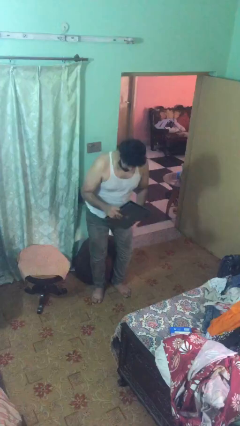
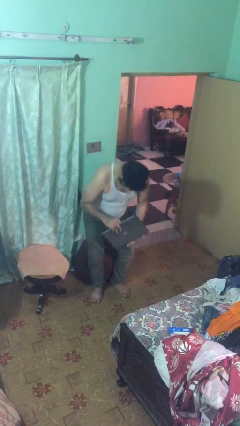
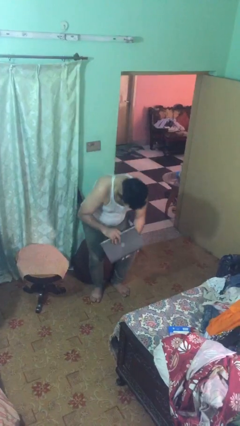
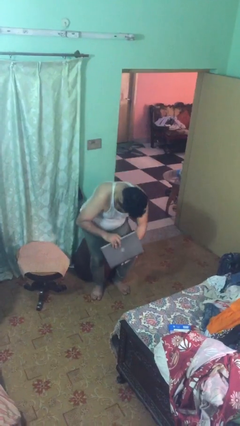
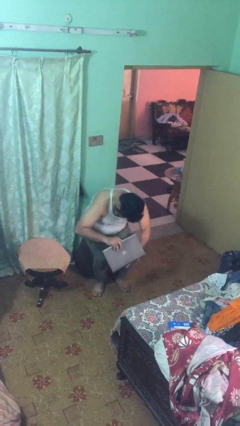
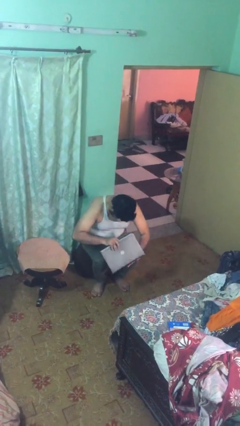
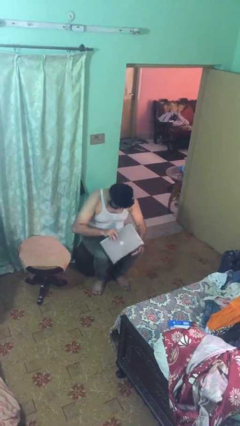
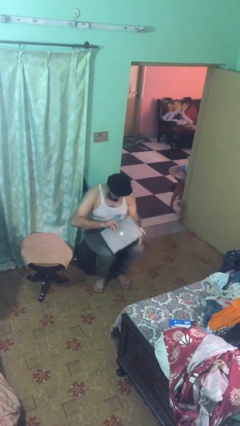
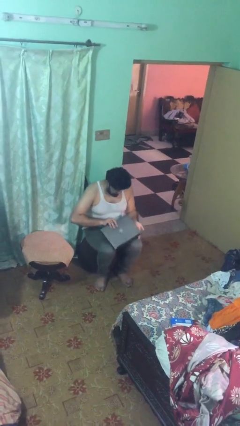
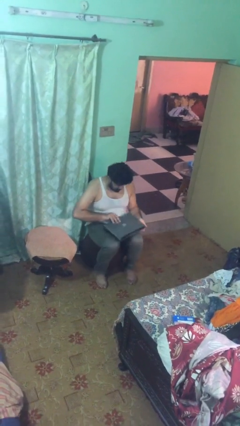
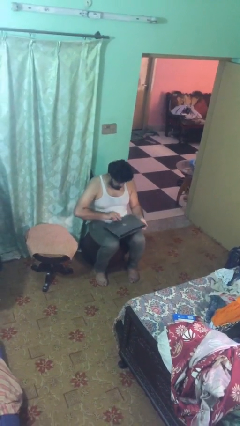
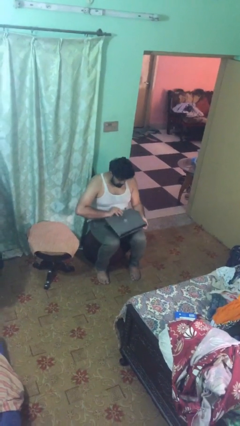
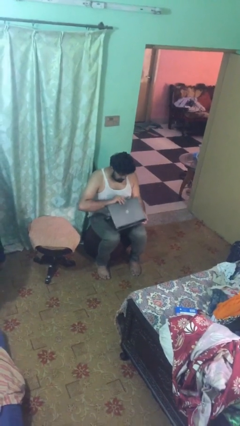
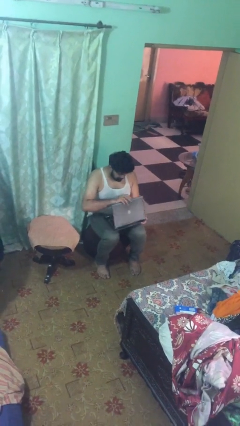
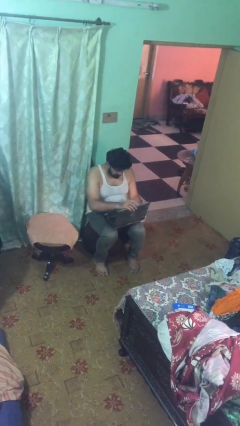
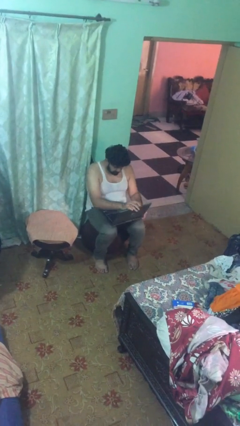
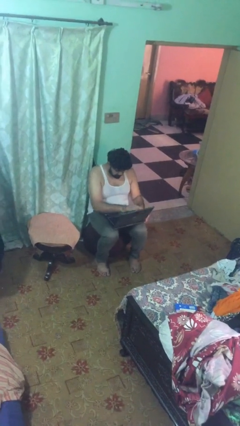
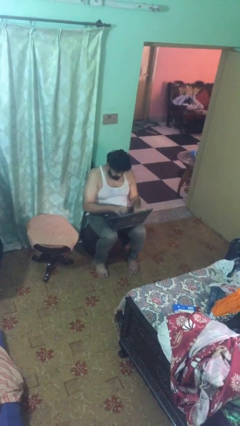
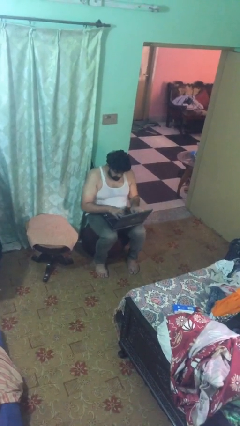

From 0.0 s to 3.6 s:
person sits down

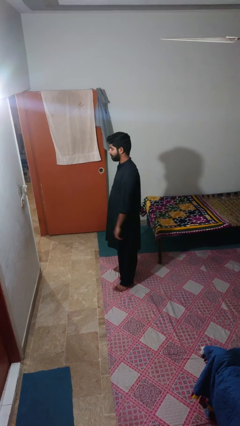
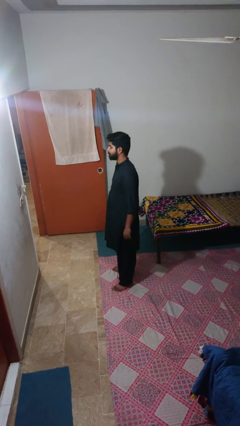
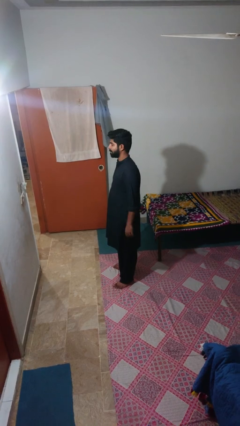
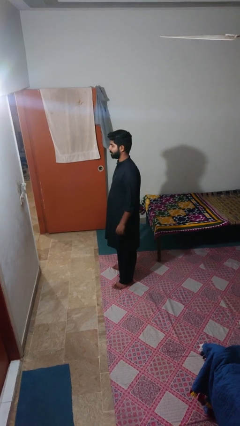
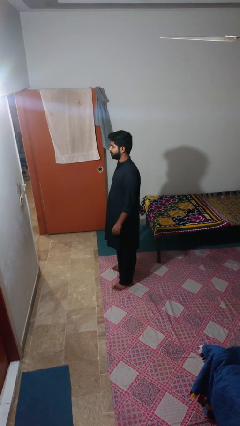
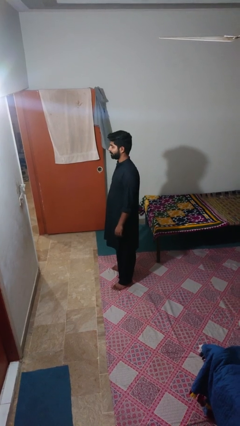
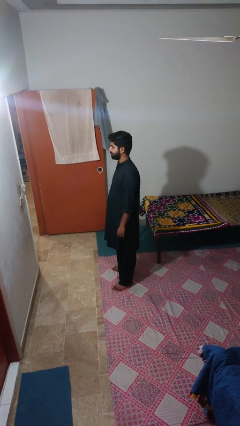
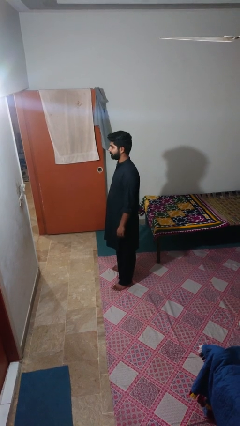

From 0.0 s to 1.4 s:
person licks fingers

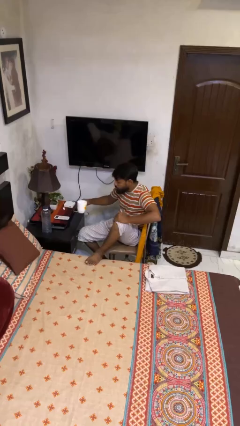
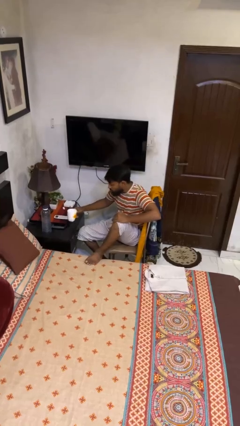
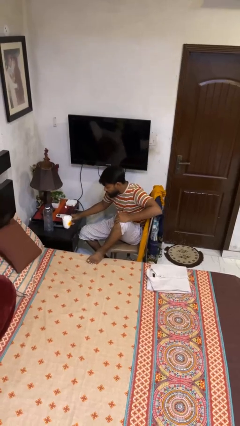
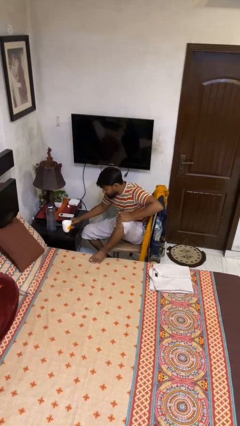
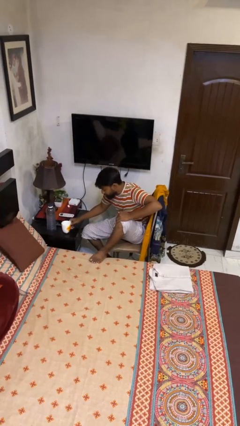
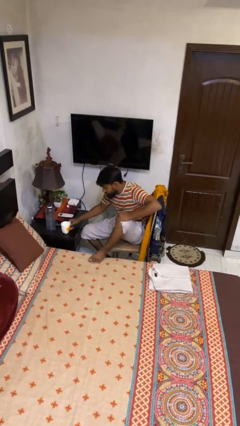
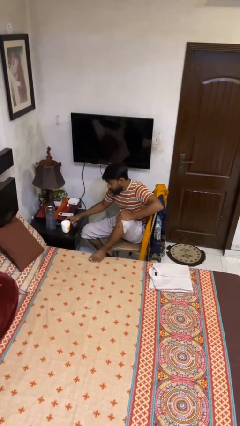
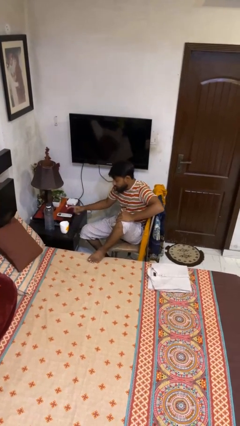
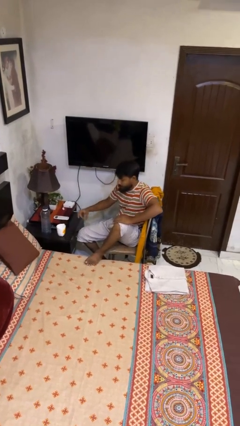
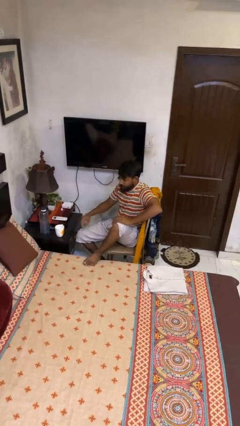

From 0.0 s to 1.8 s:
person puts down object on table

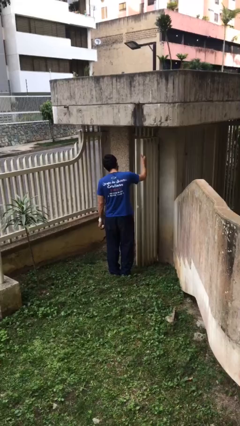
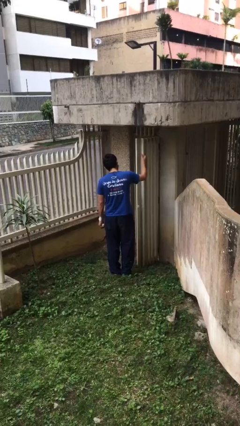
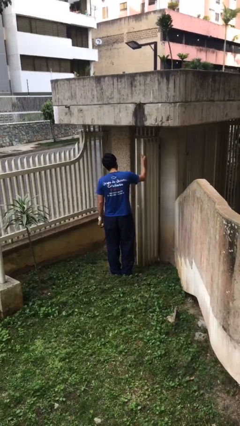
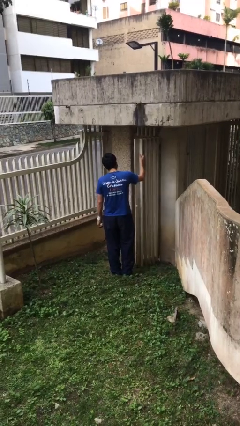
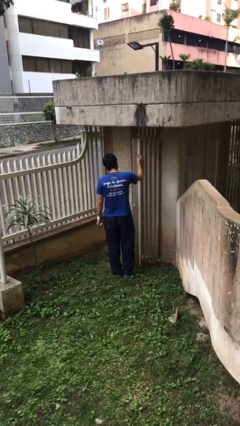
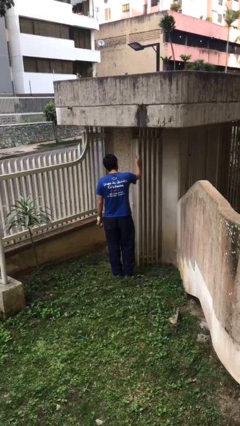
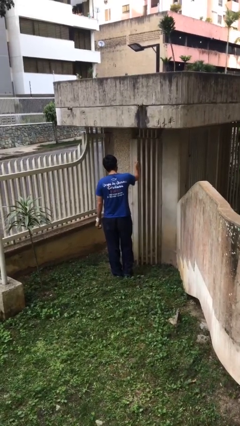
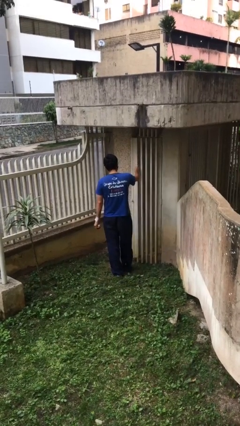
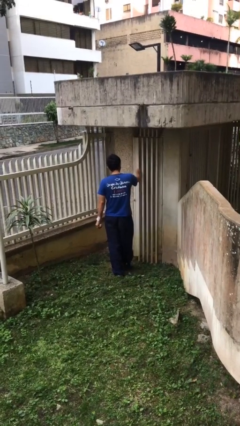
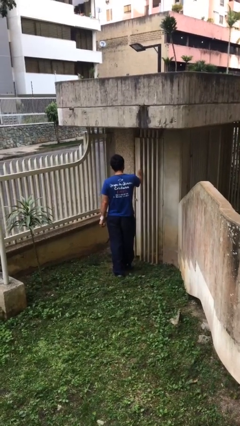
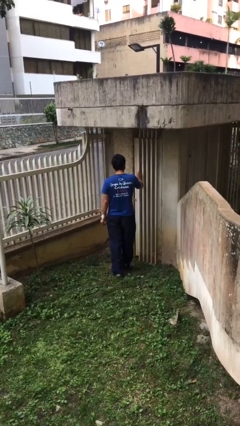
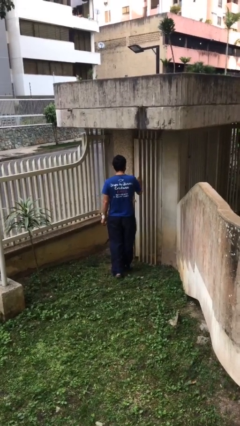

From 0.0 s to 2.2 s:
person closes facility door

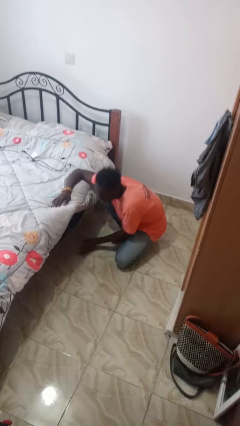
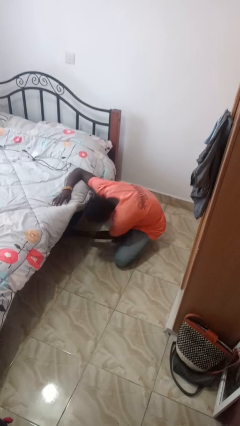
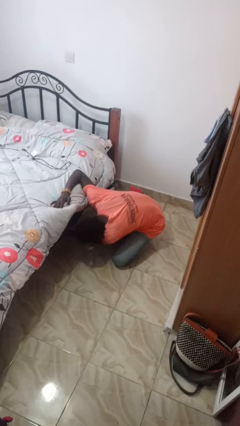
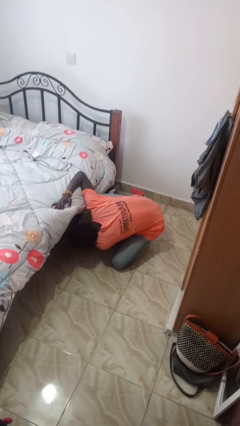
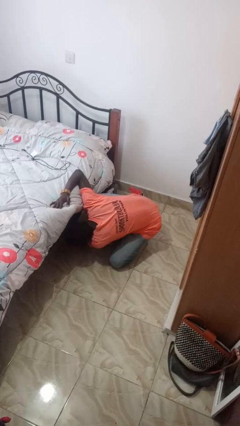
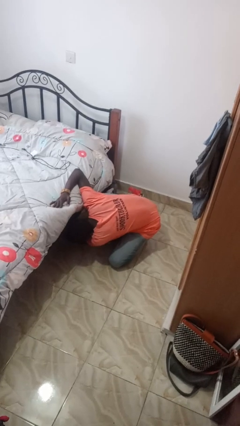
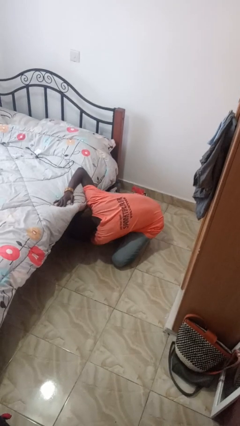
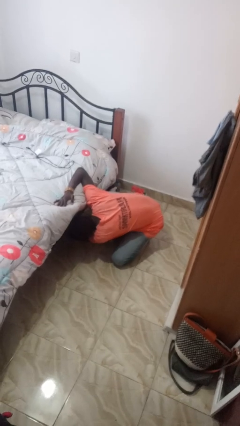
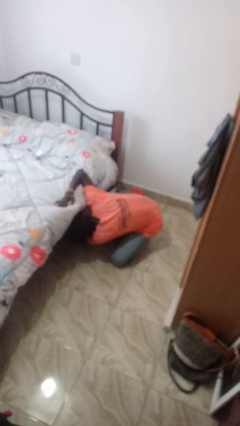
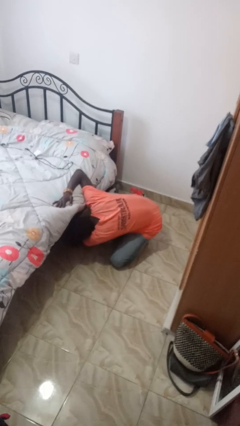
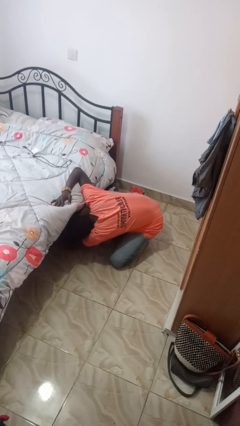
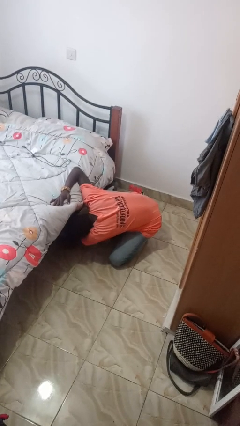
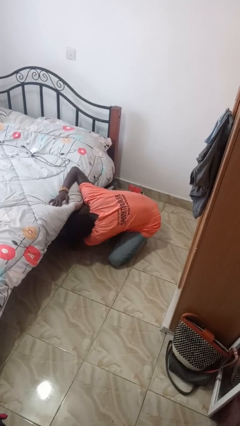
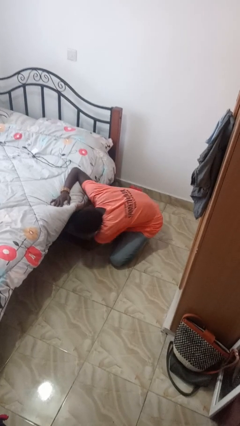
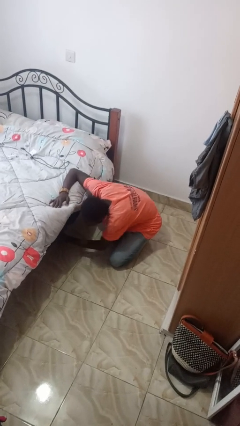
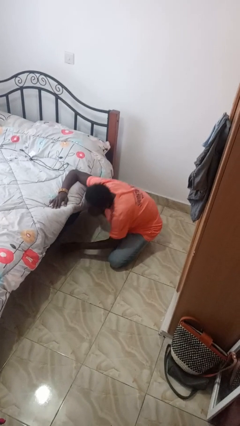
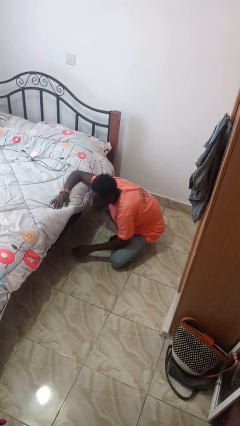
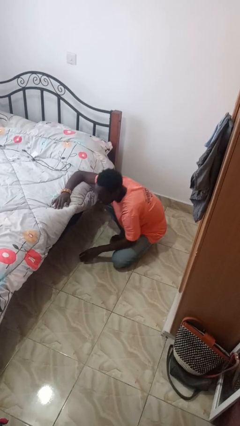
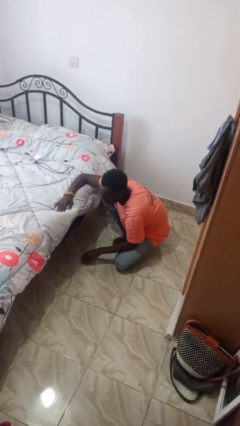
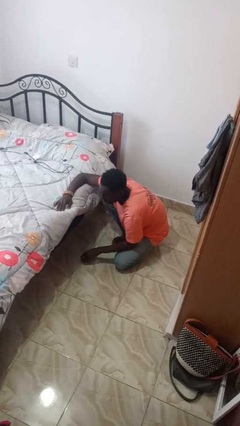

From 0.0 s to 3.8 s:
person searches under bed

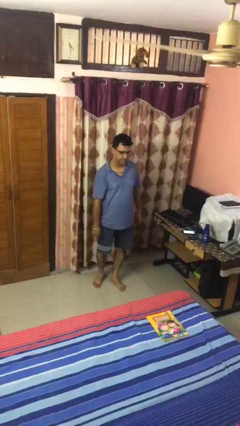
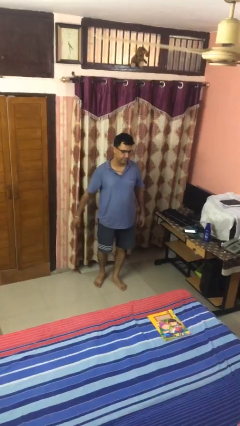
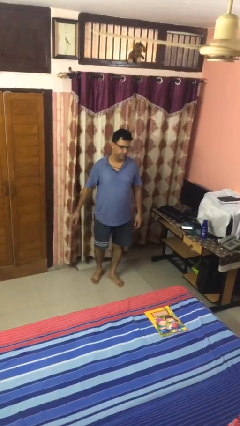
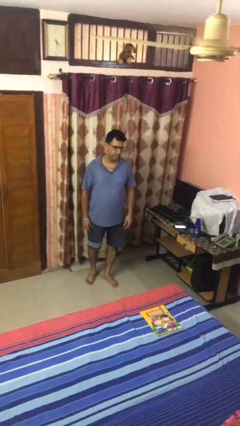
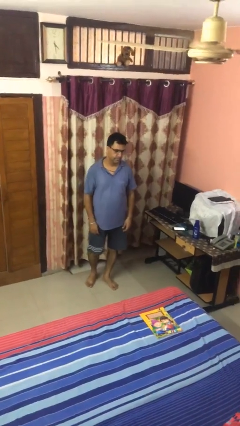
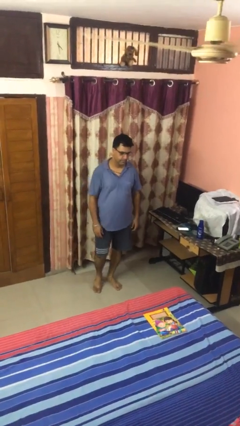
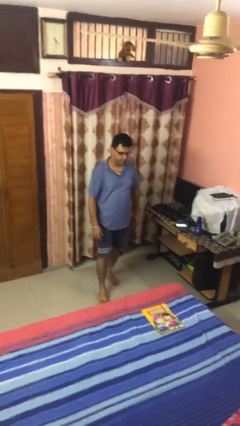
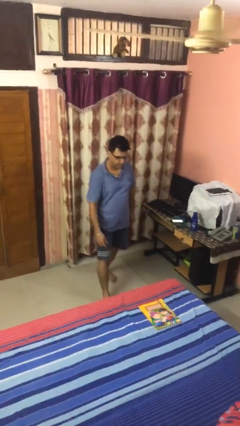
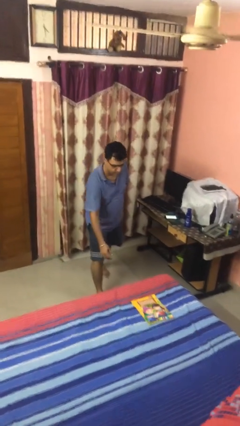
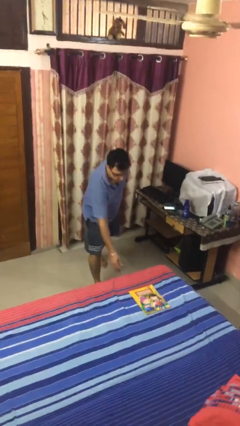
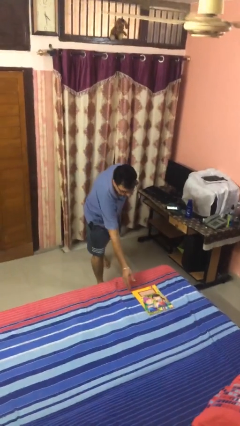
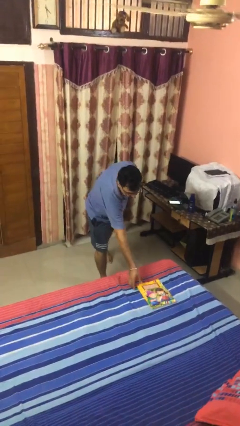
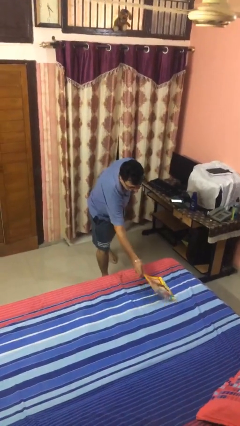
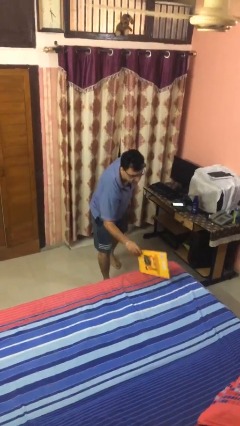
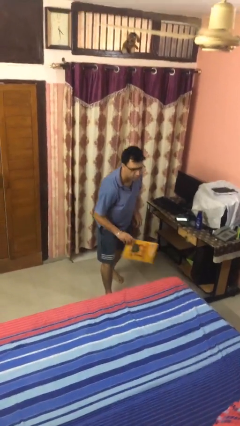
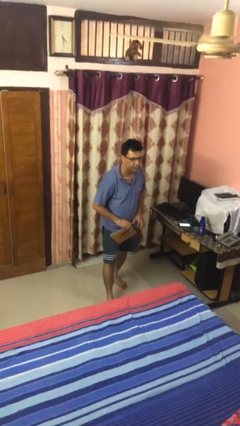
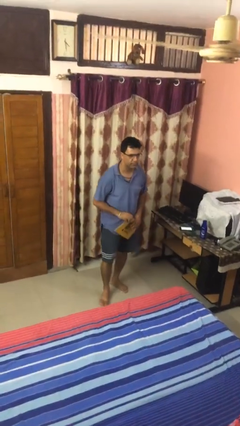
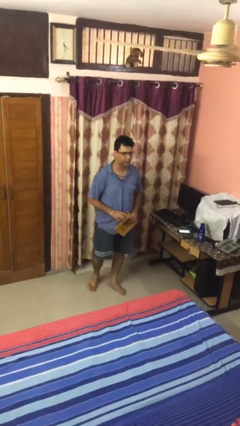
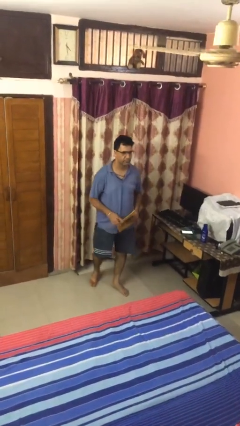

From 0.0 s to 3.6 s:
person picks up object from bed

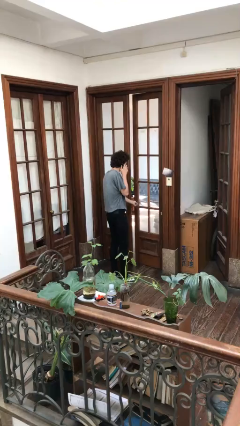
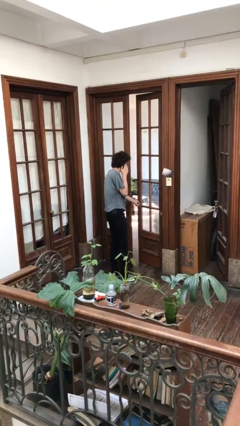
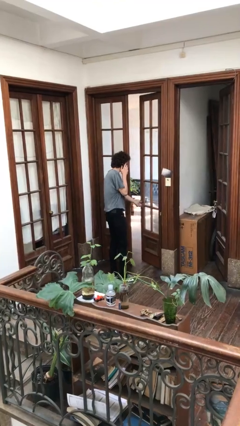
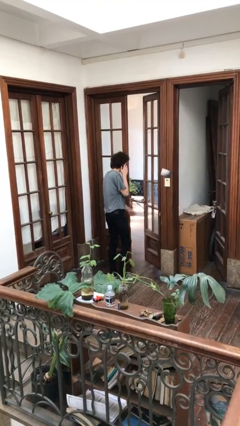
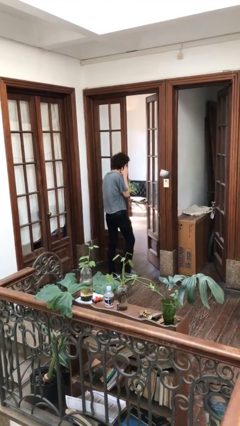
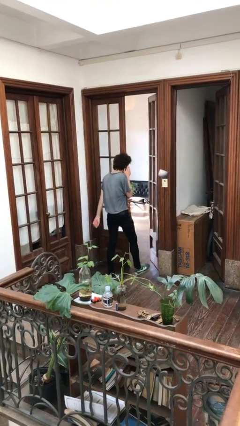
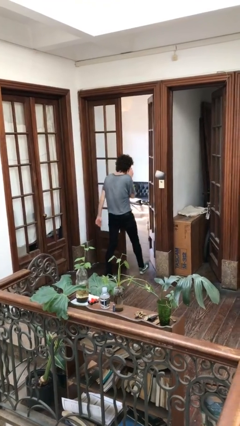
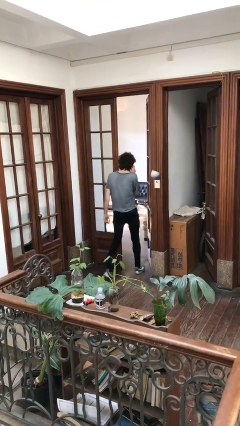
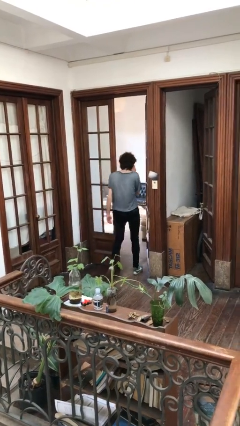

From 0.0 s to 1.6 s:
person opens facility door
